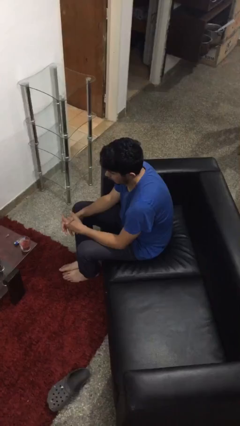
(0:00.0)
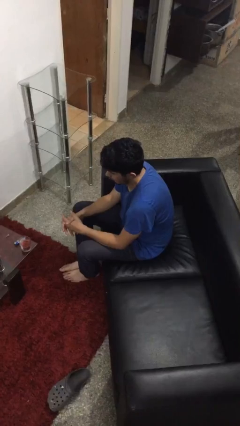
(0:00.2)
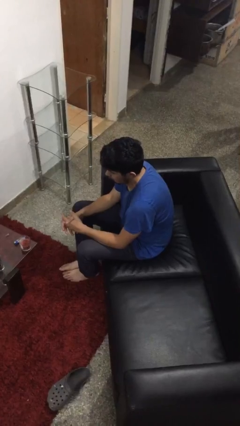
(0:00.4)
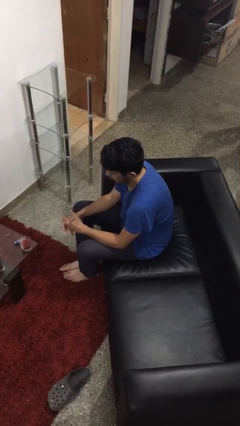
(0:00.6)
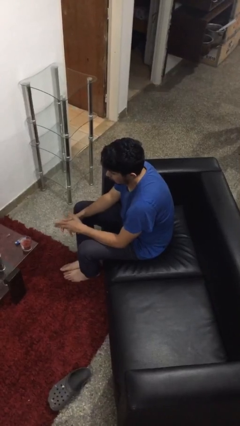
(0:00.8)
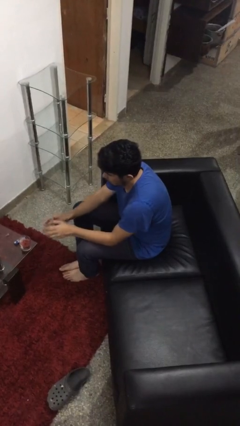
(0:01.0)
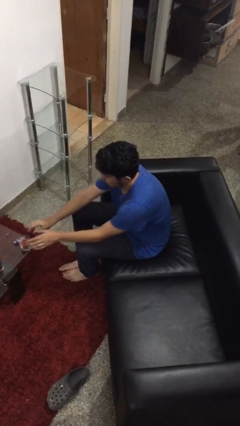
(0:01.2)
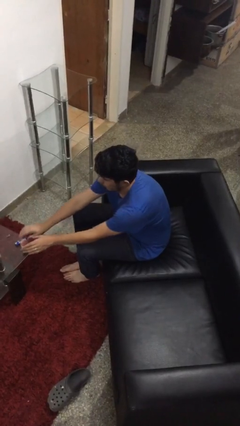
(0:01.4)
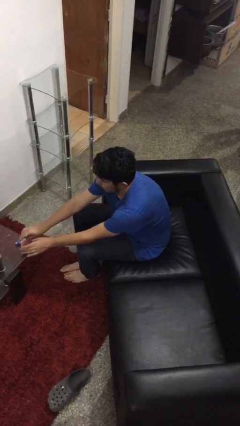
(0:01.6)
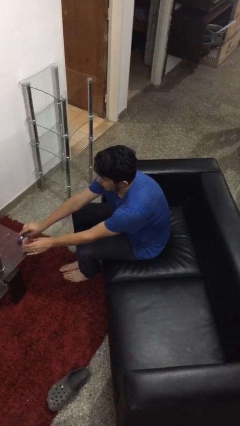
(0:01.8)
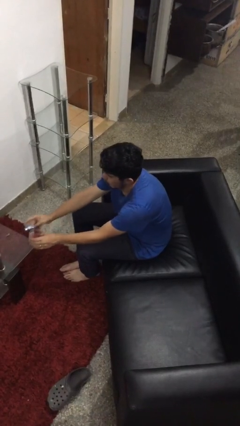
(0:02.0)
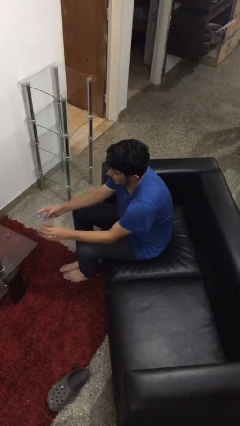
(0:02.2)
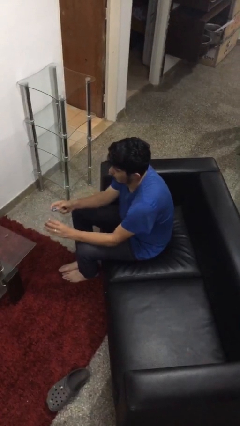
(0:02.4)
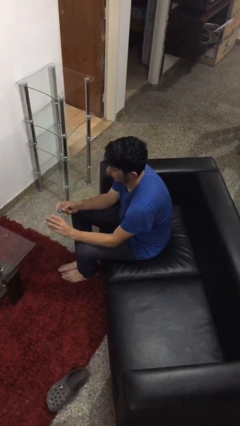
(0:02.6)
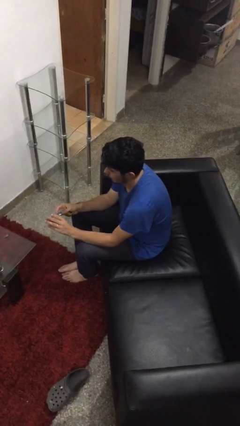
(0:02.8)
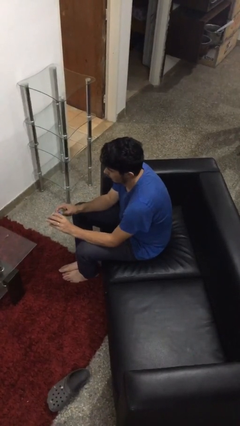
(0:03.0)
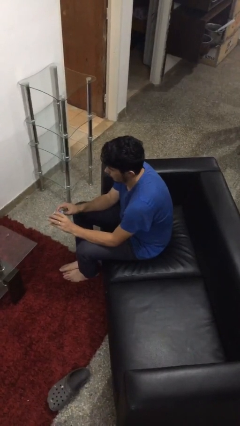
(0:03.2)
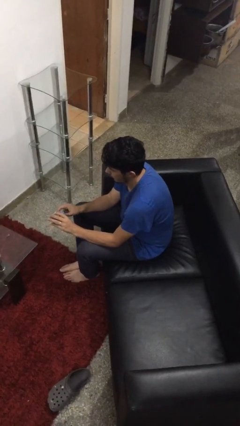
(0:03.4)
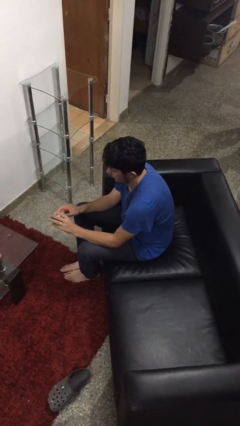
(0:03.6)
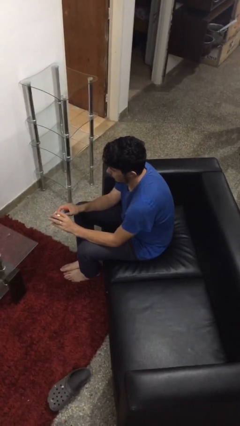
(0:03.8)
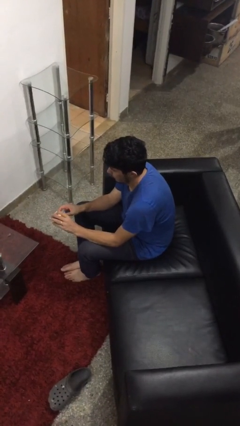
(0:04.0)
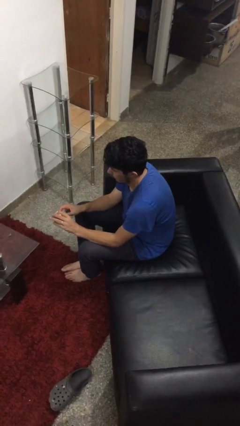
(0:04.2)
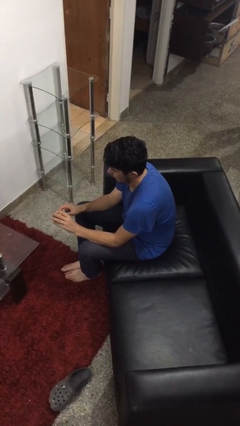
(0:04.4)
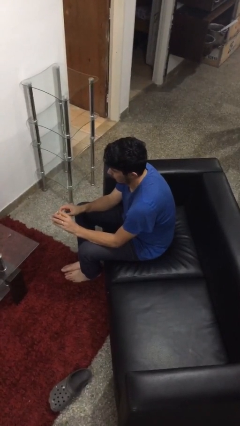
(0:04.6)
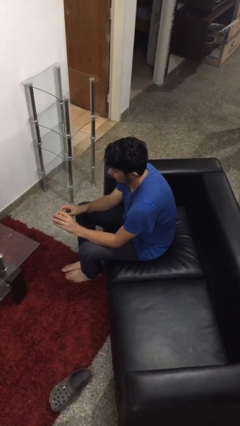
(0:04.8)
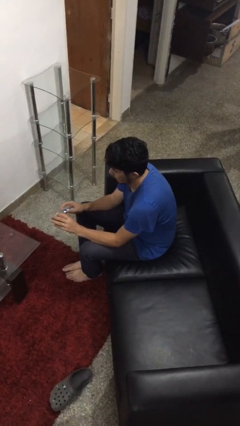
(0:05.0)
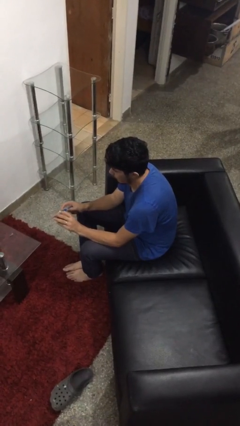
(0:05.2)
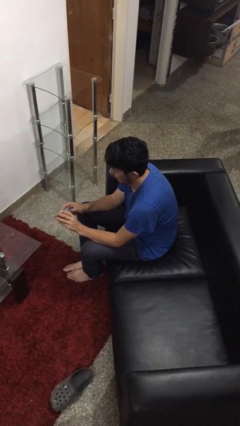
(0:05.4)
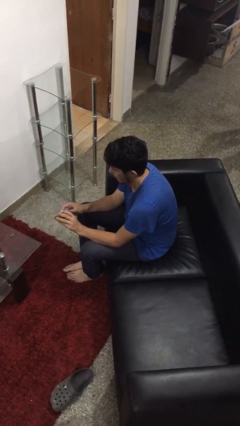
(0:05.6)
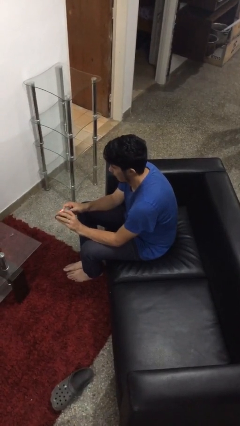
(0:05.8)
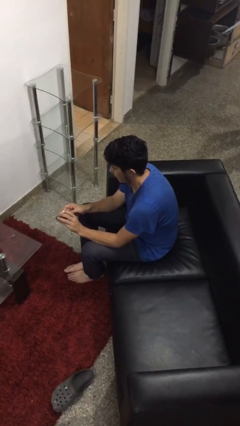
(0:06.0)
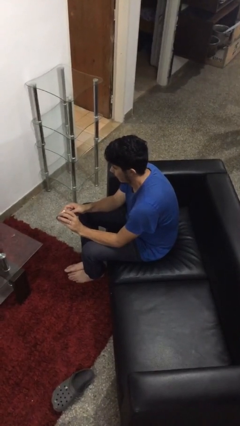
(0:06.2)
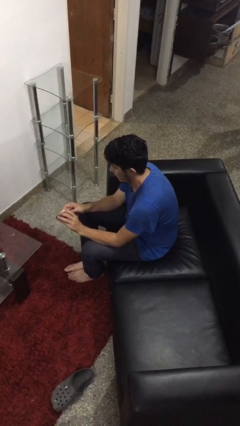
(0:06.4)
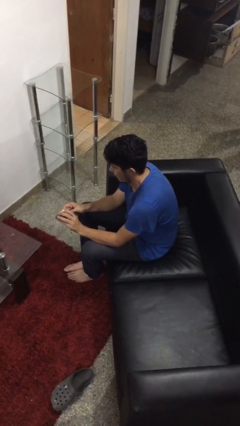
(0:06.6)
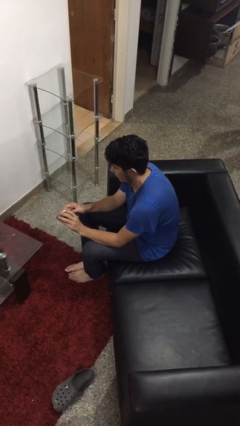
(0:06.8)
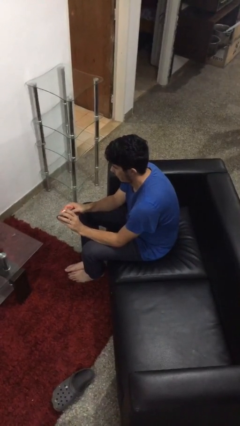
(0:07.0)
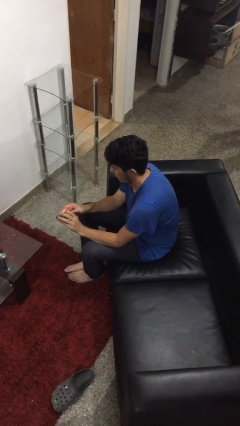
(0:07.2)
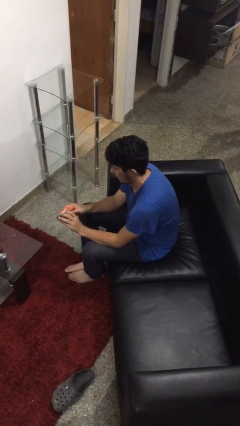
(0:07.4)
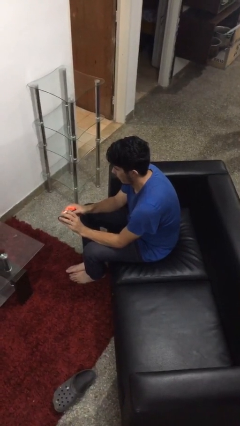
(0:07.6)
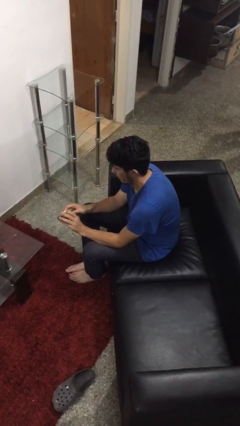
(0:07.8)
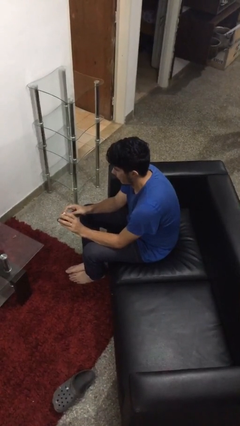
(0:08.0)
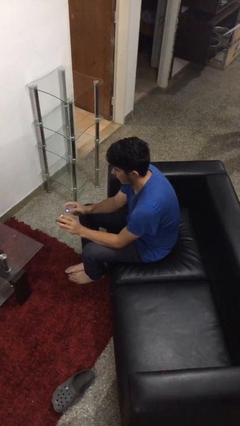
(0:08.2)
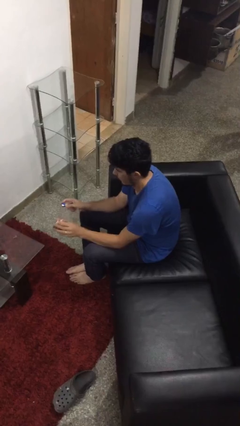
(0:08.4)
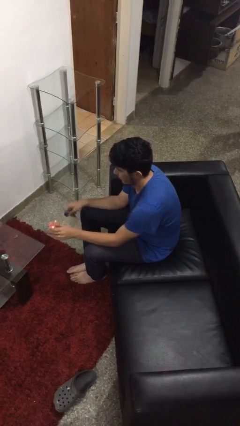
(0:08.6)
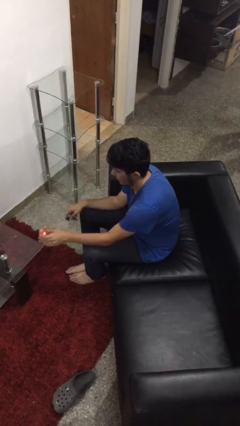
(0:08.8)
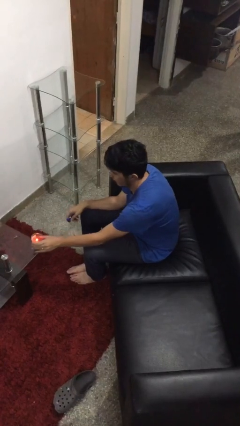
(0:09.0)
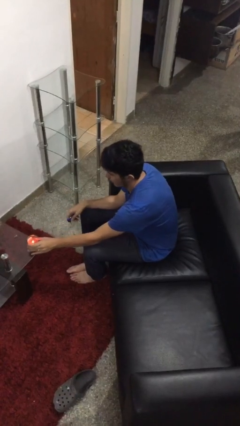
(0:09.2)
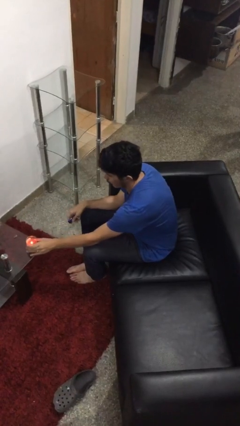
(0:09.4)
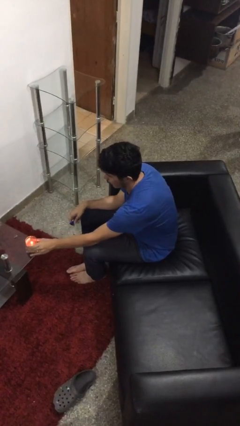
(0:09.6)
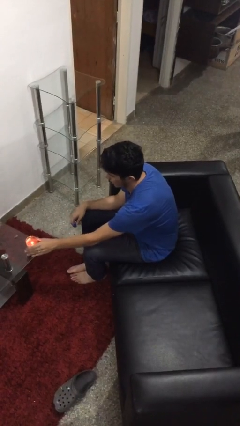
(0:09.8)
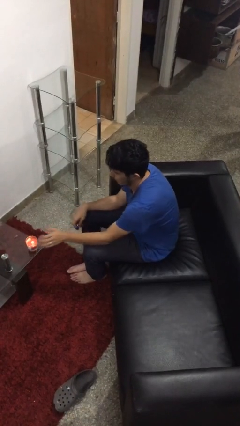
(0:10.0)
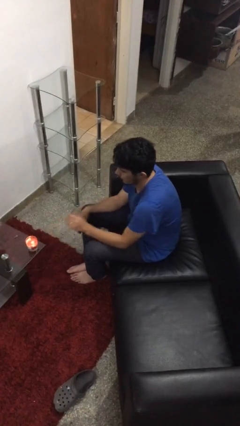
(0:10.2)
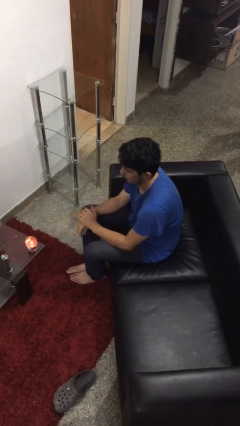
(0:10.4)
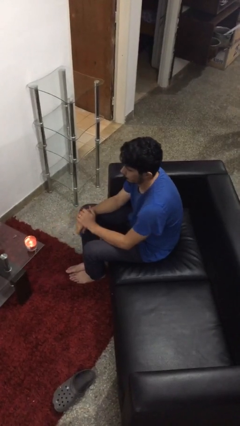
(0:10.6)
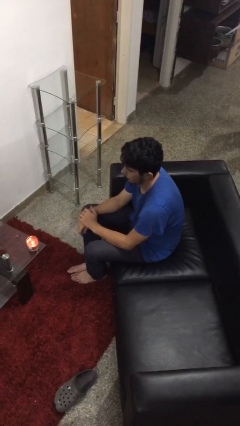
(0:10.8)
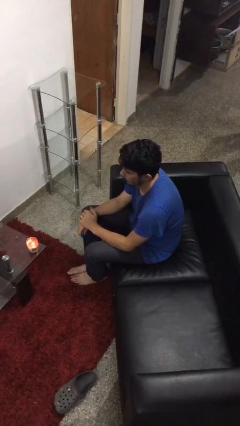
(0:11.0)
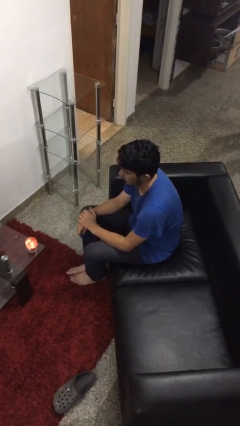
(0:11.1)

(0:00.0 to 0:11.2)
person lights candle

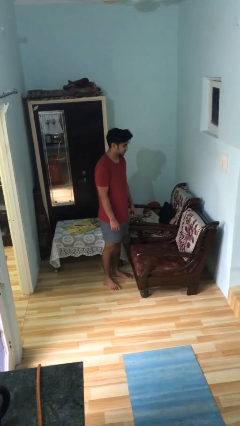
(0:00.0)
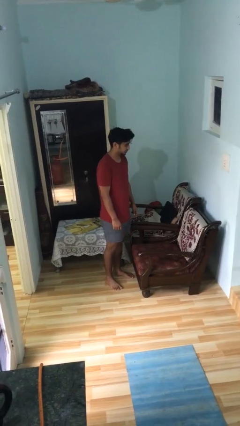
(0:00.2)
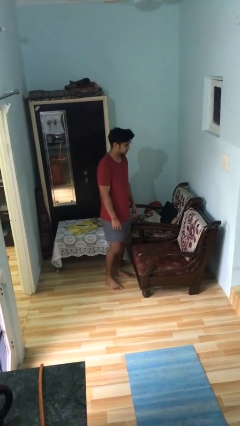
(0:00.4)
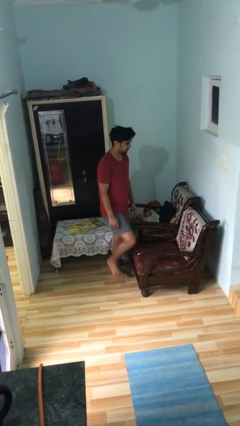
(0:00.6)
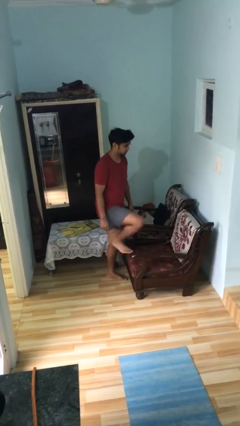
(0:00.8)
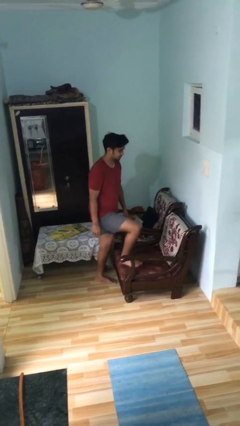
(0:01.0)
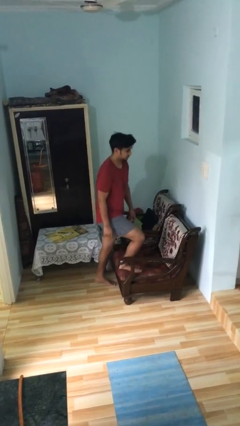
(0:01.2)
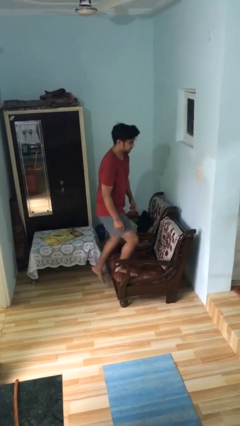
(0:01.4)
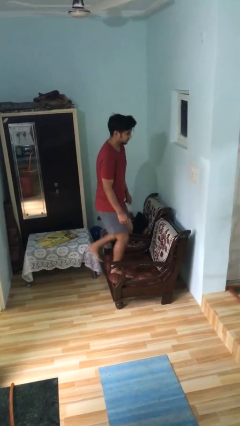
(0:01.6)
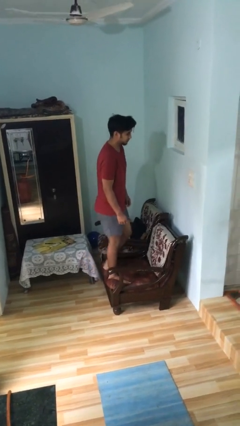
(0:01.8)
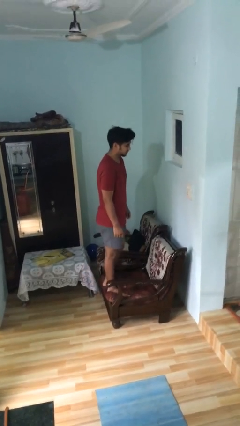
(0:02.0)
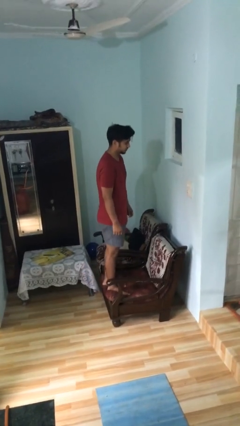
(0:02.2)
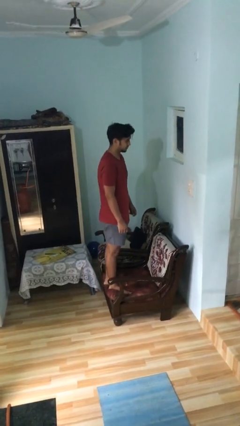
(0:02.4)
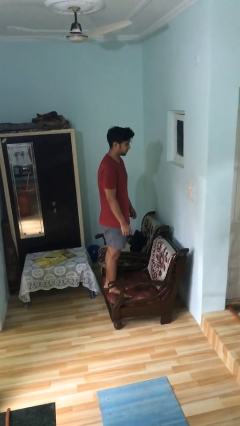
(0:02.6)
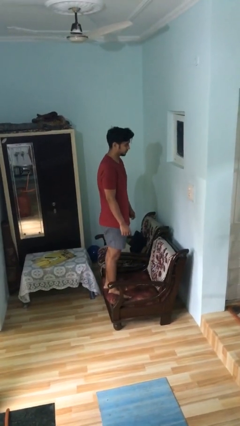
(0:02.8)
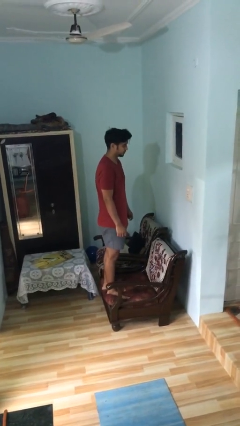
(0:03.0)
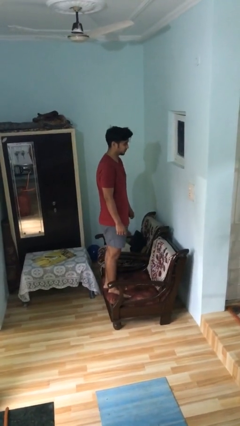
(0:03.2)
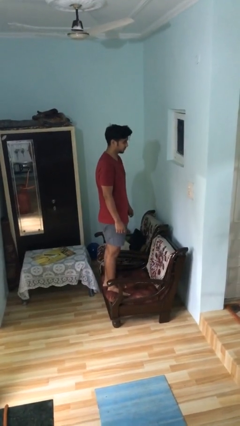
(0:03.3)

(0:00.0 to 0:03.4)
person climbs on couch

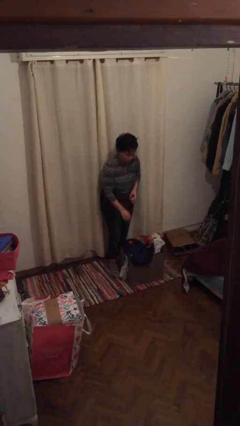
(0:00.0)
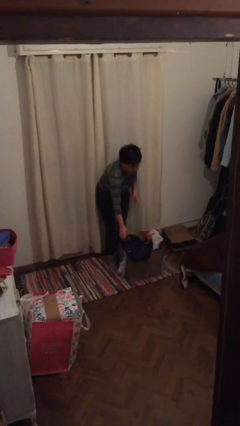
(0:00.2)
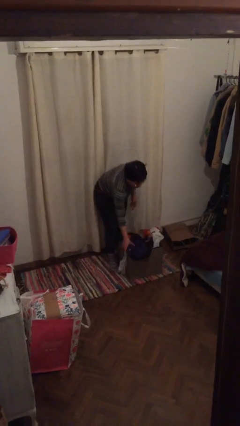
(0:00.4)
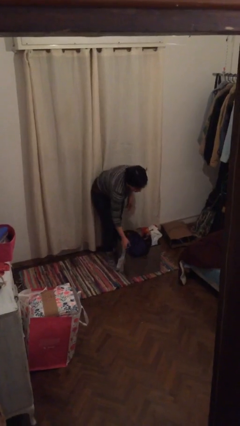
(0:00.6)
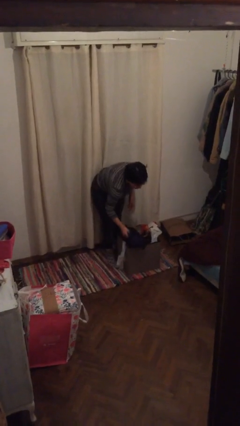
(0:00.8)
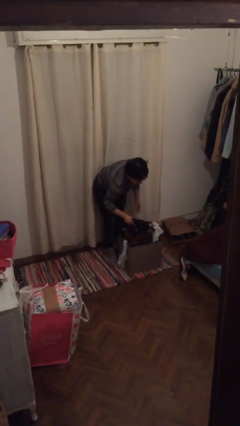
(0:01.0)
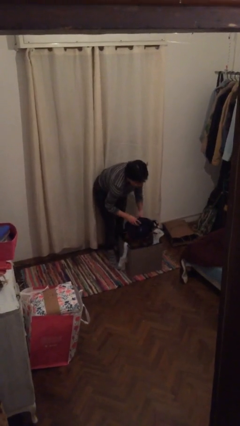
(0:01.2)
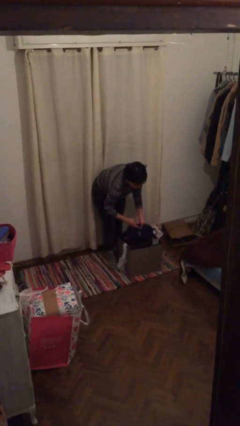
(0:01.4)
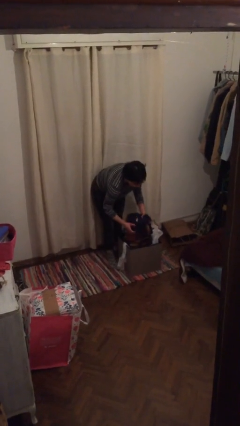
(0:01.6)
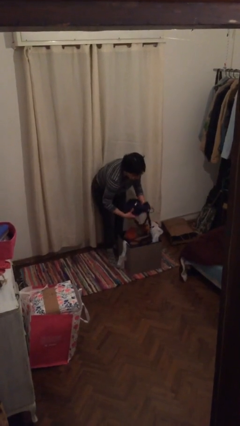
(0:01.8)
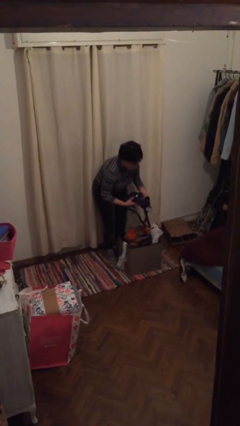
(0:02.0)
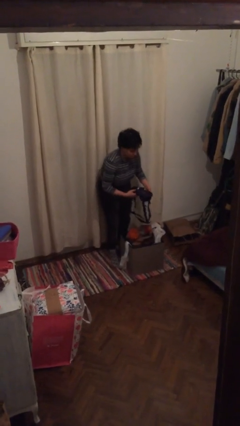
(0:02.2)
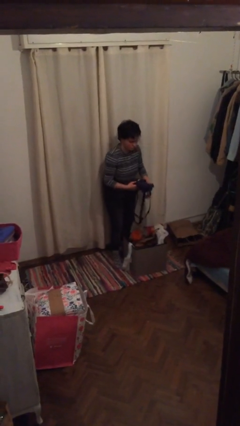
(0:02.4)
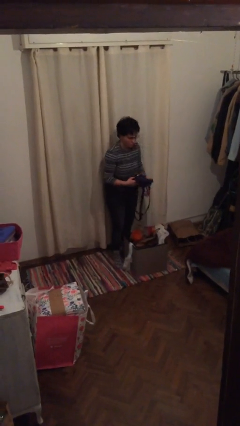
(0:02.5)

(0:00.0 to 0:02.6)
person takes object from basket

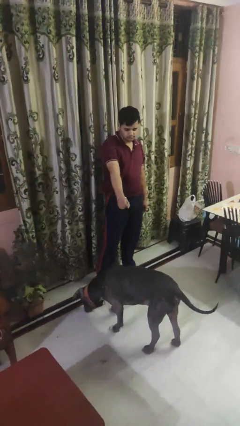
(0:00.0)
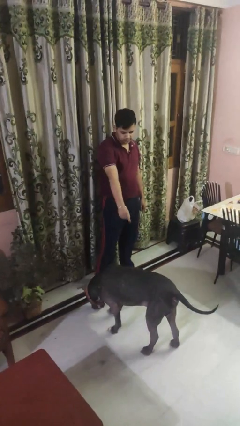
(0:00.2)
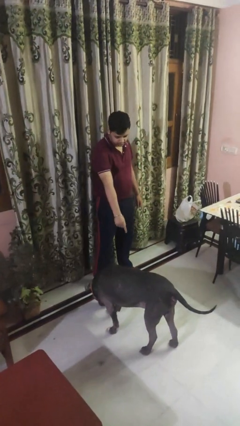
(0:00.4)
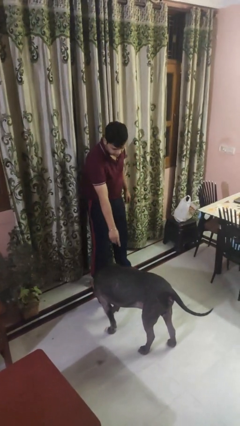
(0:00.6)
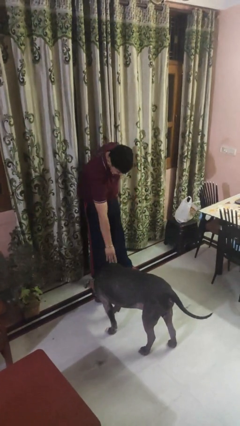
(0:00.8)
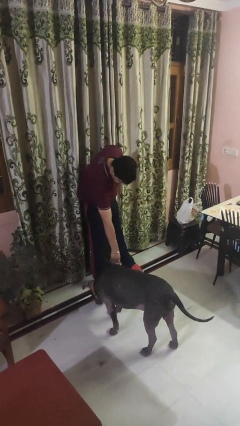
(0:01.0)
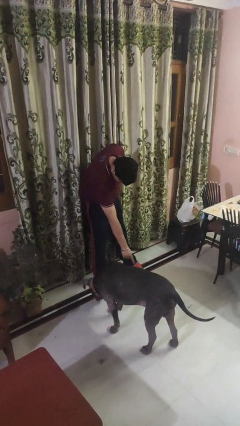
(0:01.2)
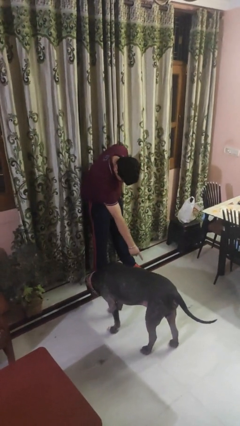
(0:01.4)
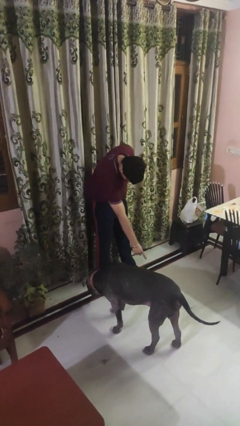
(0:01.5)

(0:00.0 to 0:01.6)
person points to dog
